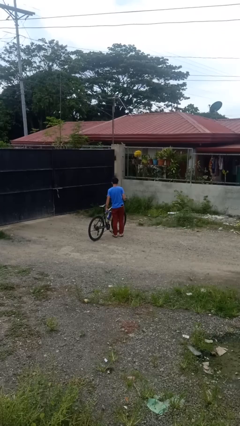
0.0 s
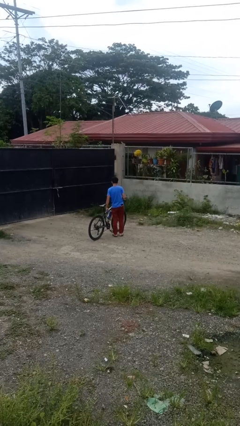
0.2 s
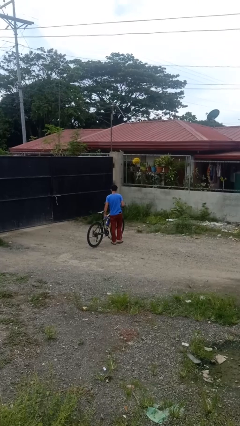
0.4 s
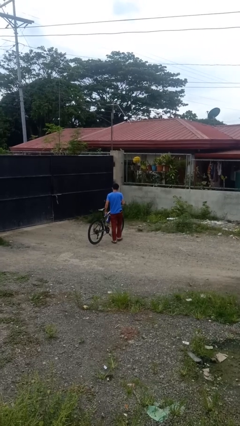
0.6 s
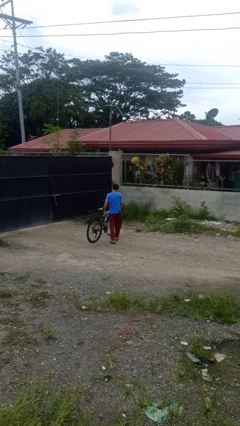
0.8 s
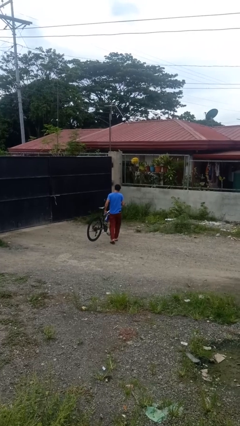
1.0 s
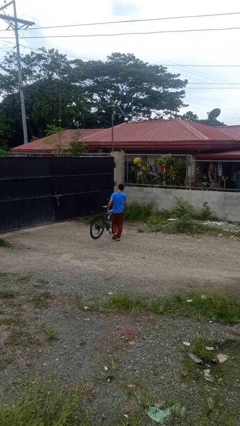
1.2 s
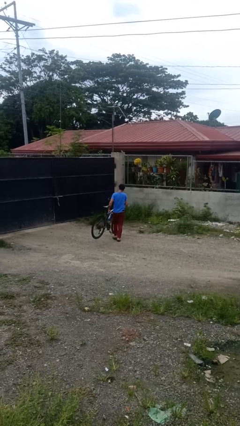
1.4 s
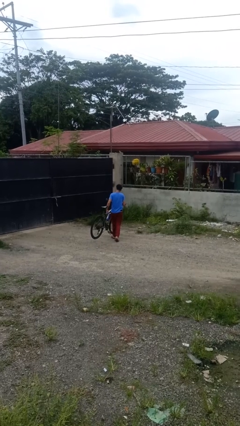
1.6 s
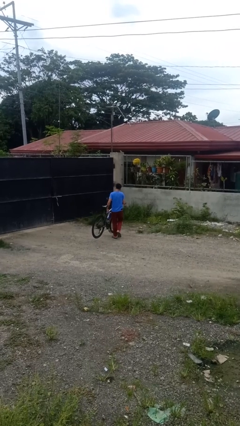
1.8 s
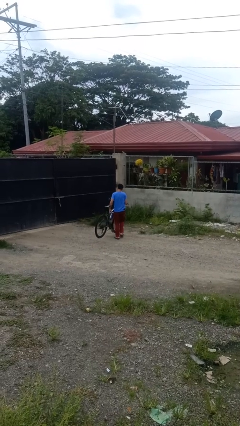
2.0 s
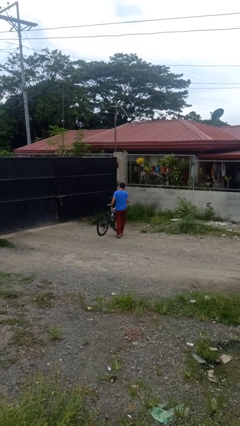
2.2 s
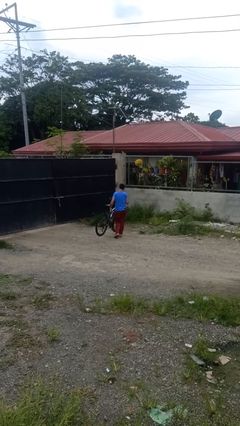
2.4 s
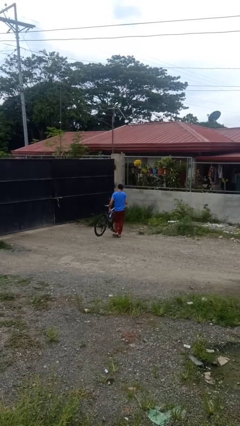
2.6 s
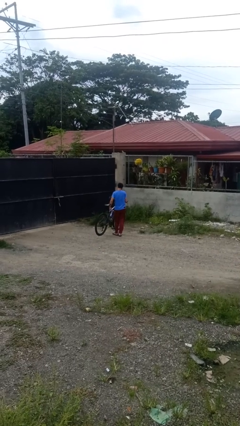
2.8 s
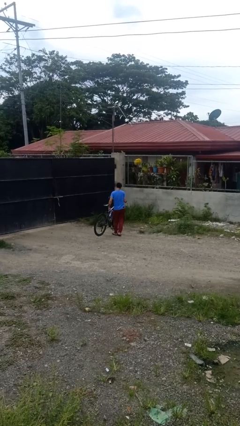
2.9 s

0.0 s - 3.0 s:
person carries bicycle

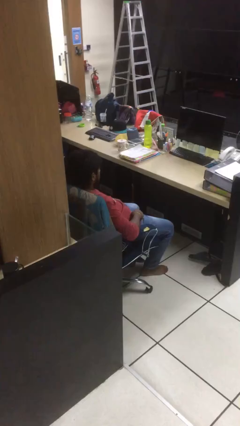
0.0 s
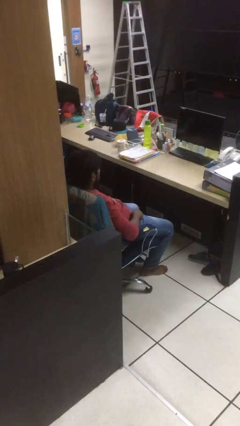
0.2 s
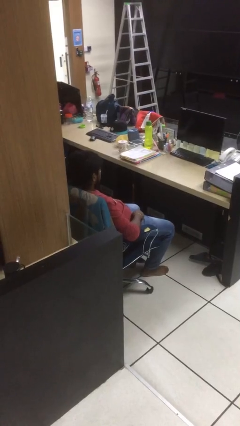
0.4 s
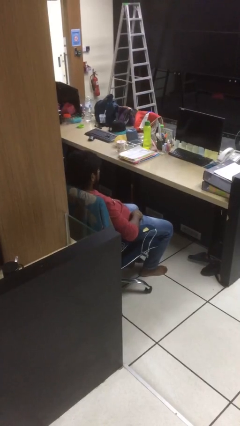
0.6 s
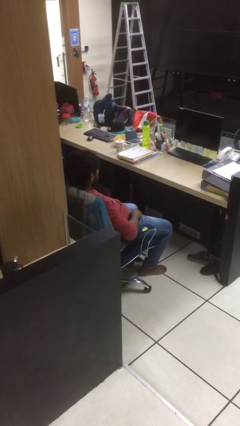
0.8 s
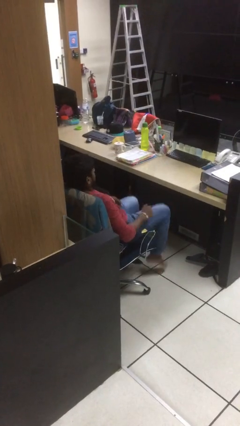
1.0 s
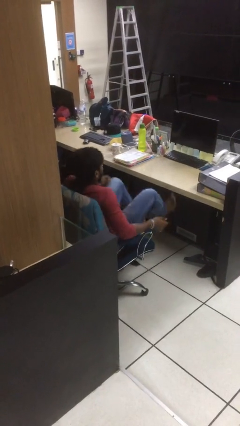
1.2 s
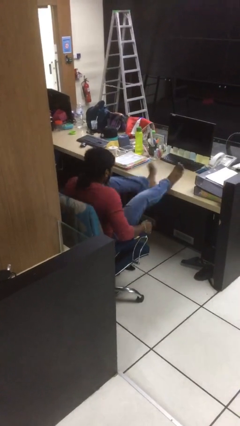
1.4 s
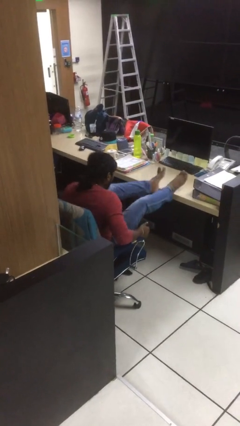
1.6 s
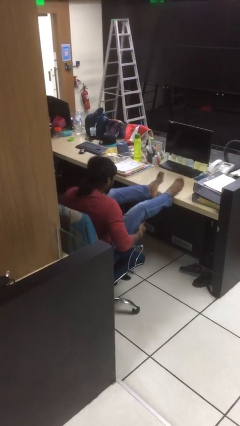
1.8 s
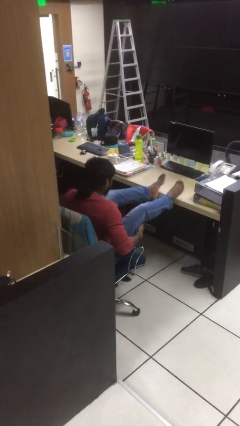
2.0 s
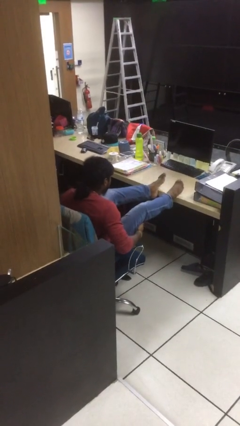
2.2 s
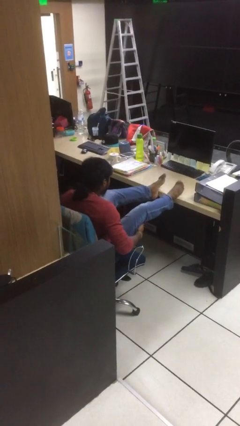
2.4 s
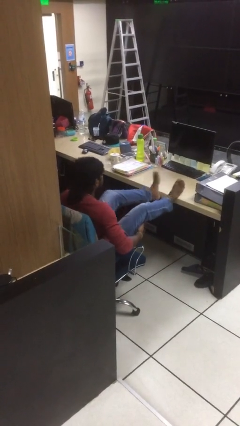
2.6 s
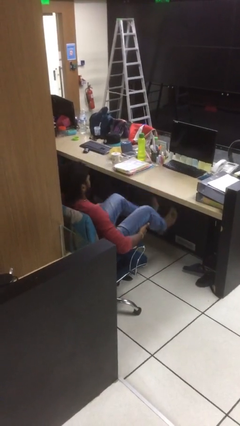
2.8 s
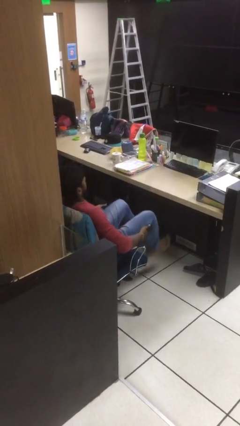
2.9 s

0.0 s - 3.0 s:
person puts feet up

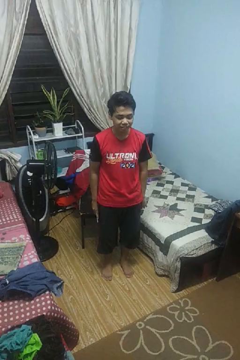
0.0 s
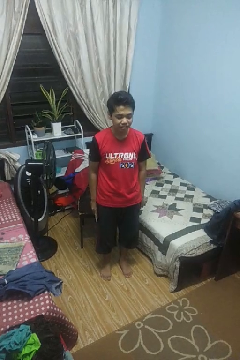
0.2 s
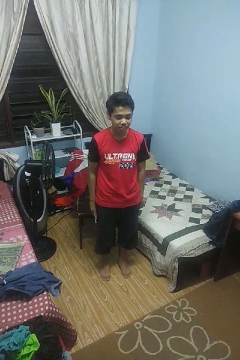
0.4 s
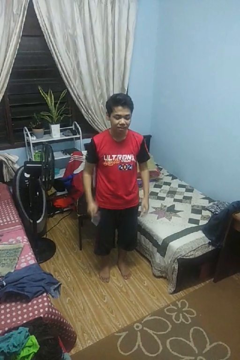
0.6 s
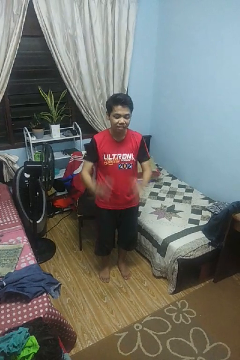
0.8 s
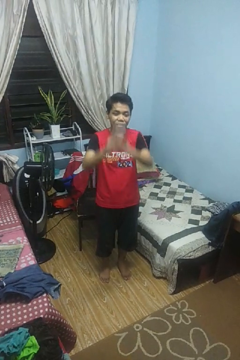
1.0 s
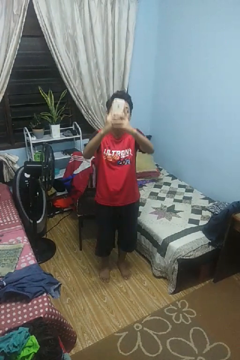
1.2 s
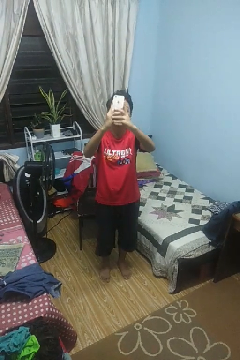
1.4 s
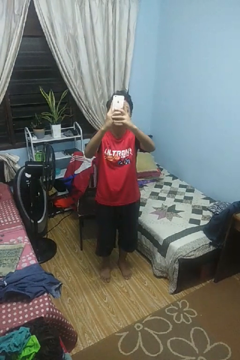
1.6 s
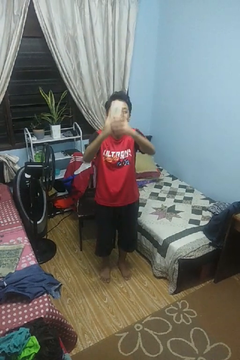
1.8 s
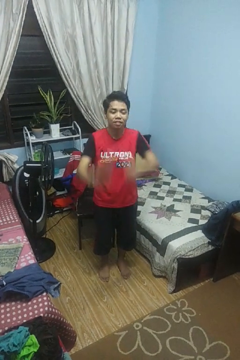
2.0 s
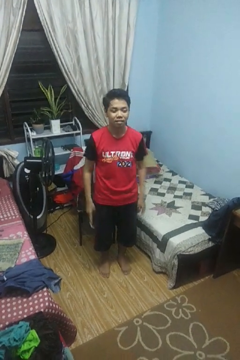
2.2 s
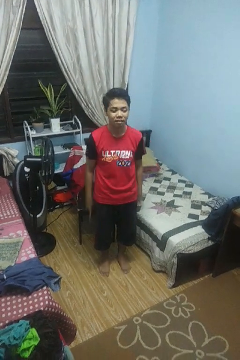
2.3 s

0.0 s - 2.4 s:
person takes selfie

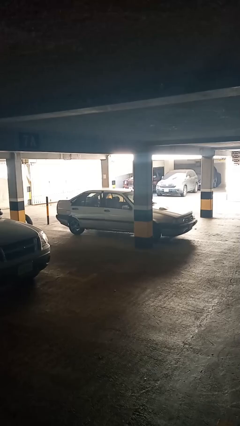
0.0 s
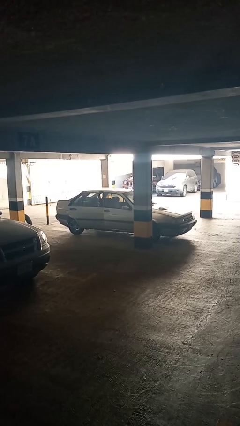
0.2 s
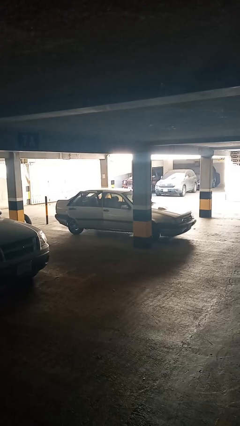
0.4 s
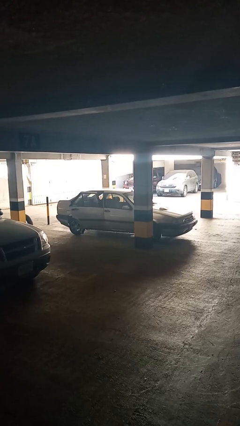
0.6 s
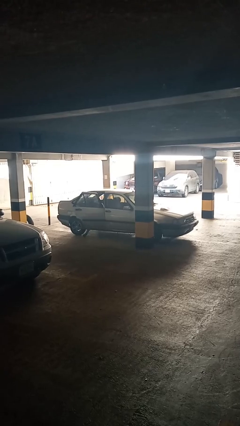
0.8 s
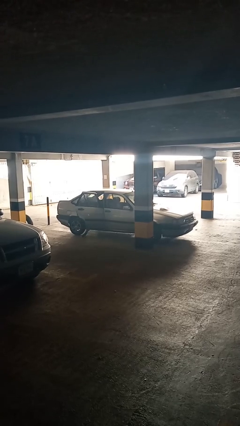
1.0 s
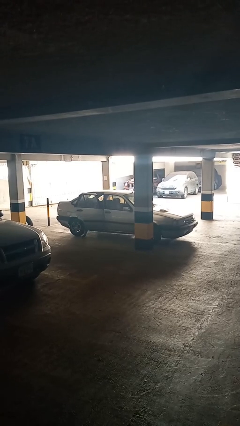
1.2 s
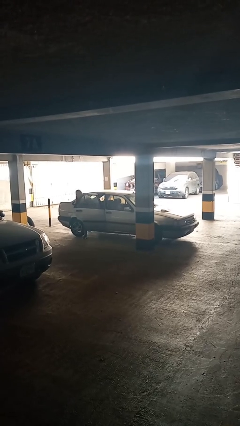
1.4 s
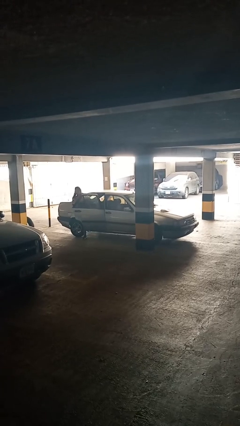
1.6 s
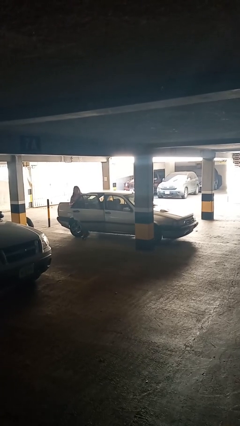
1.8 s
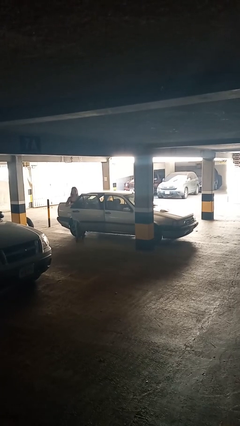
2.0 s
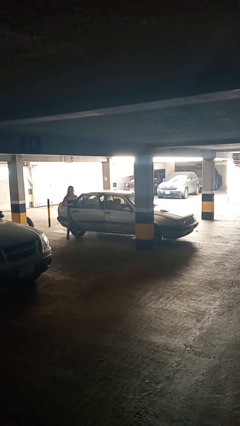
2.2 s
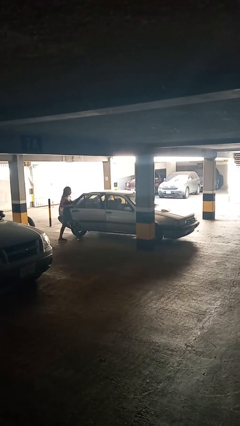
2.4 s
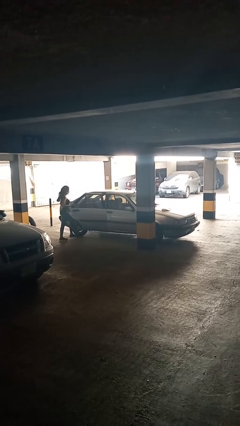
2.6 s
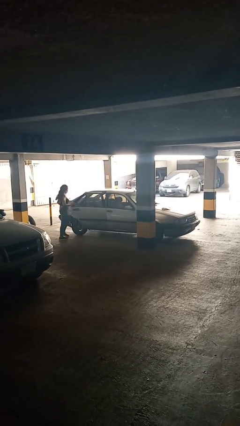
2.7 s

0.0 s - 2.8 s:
car drops off person

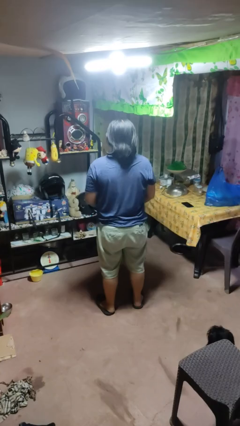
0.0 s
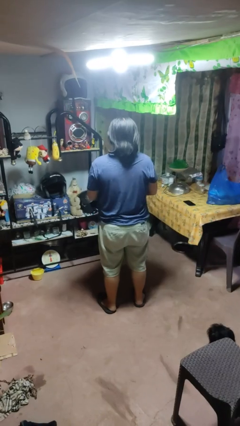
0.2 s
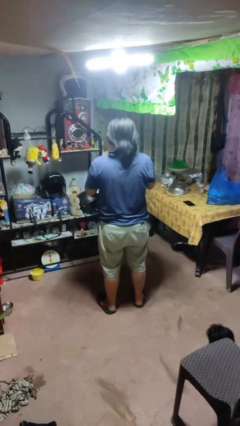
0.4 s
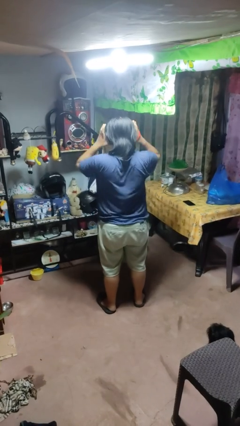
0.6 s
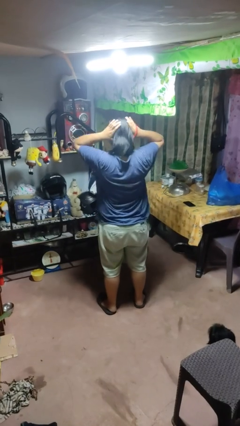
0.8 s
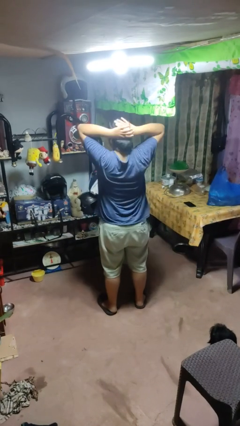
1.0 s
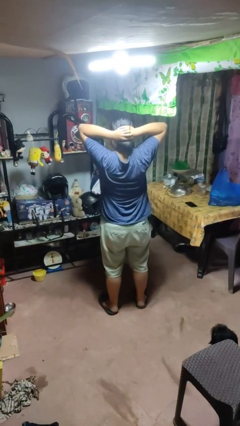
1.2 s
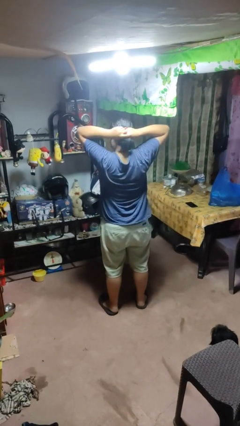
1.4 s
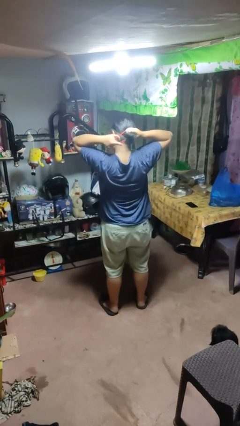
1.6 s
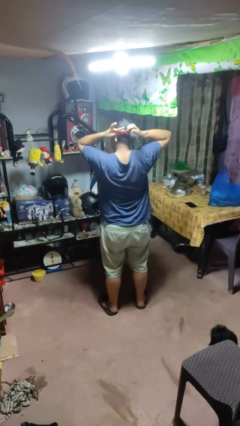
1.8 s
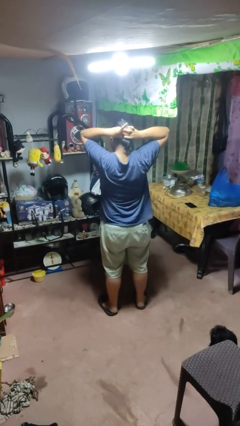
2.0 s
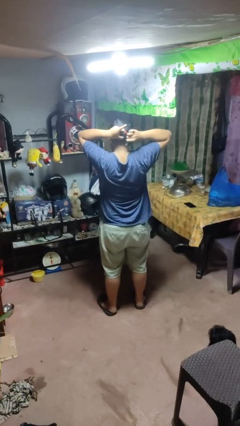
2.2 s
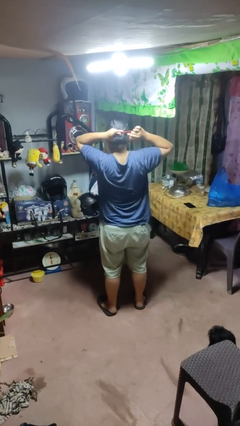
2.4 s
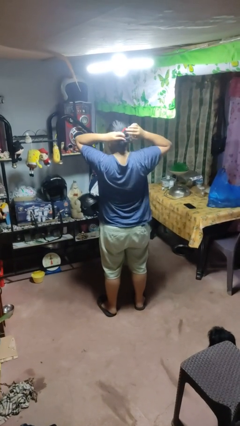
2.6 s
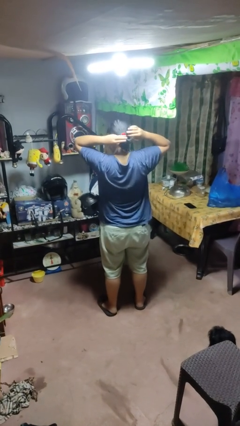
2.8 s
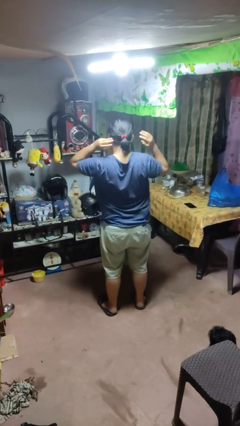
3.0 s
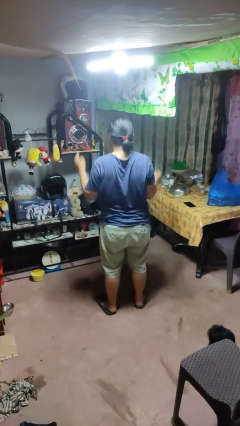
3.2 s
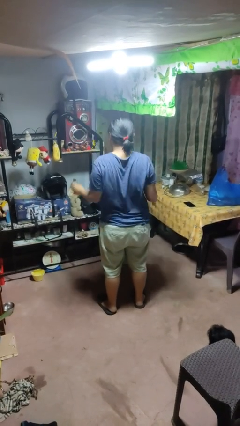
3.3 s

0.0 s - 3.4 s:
person puts hair in ponytail

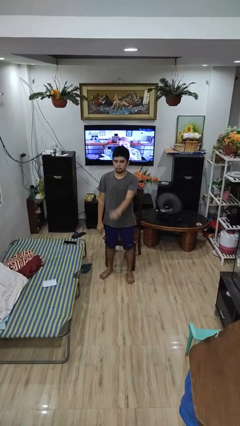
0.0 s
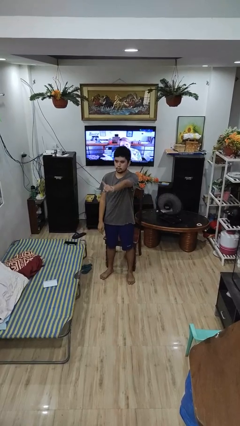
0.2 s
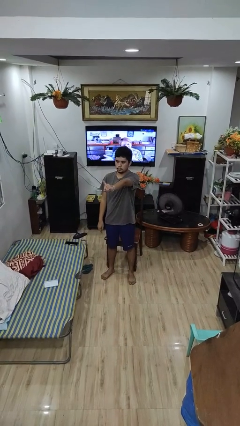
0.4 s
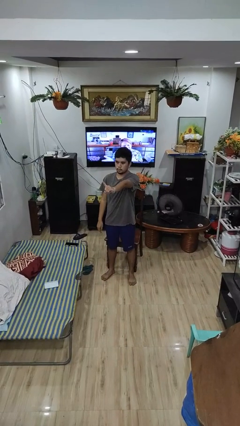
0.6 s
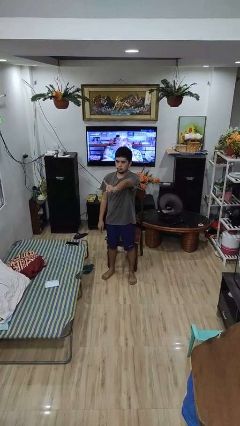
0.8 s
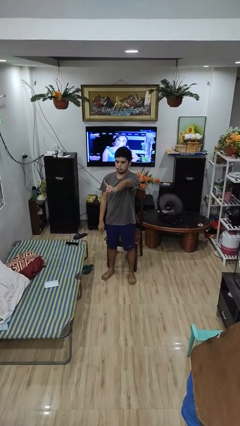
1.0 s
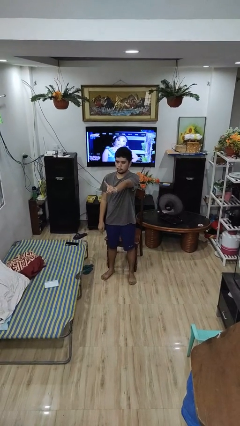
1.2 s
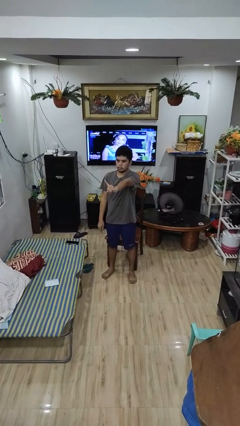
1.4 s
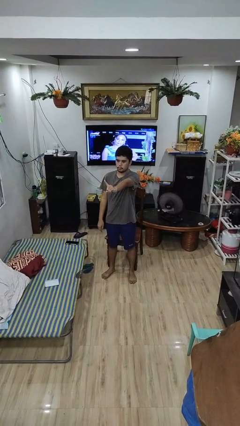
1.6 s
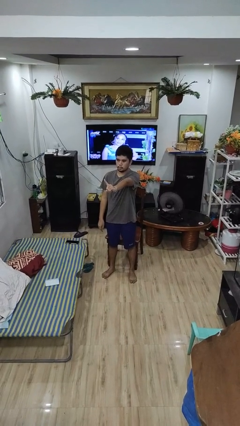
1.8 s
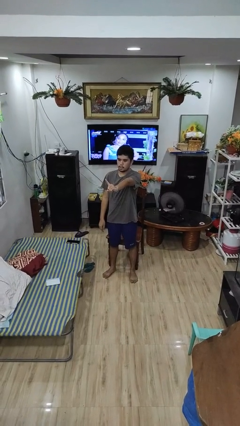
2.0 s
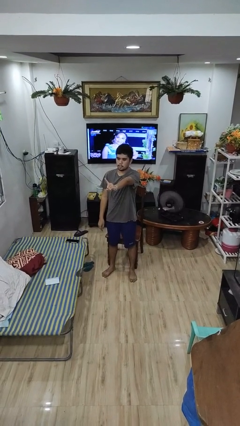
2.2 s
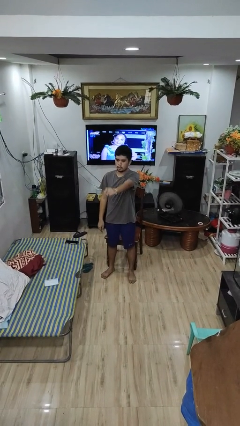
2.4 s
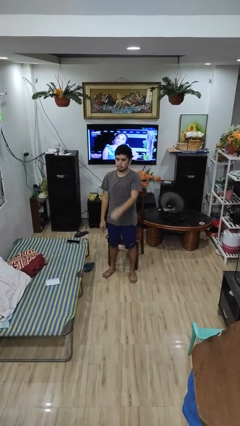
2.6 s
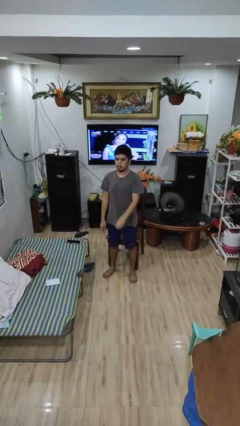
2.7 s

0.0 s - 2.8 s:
person gestures number one

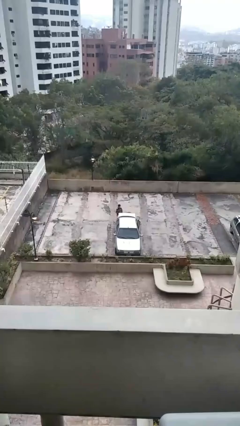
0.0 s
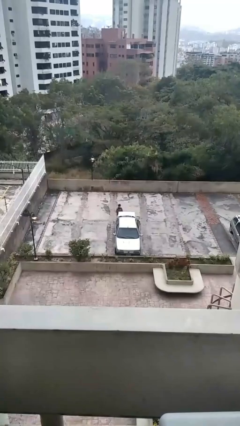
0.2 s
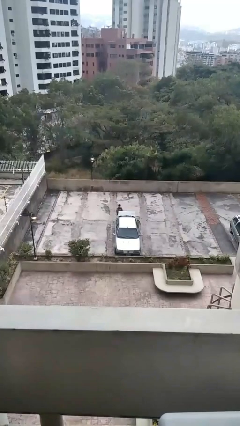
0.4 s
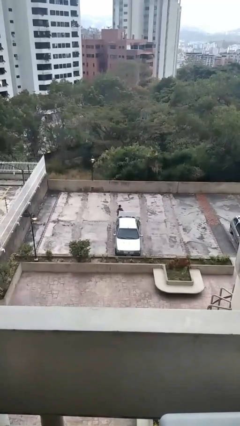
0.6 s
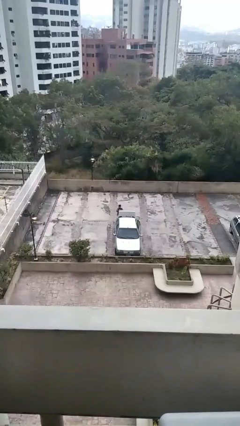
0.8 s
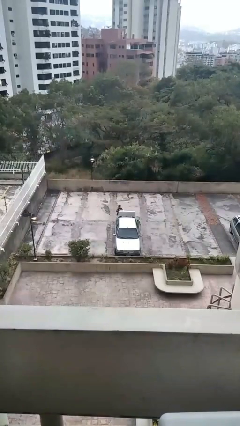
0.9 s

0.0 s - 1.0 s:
person opens car trunk
